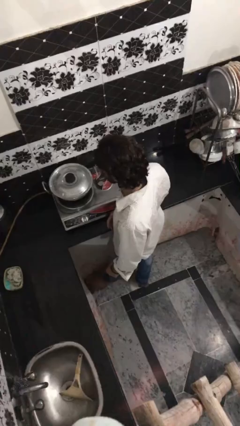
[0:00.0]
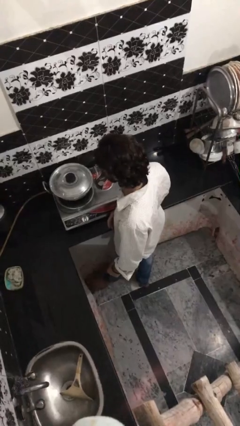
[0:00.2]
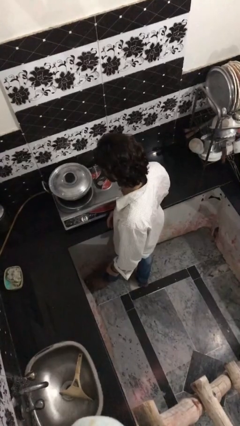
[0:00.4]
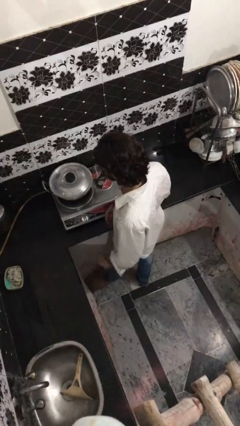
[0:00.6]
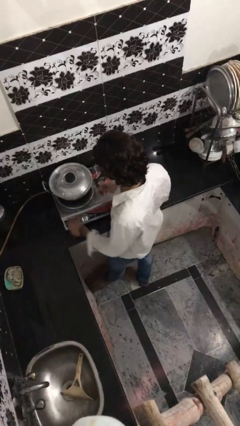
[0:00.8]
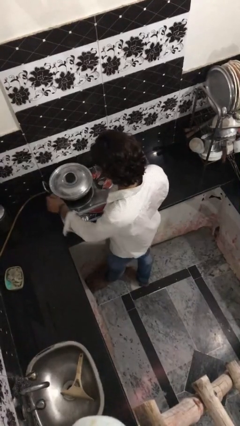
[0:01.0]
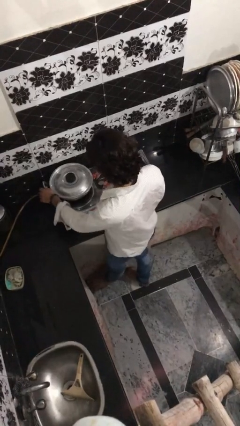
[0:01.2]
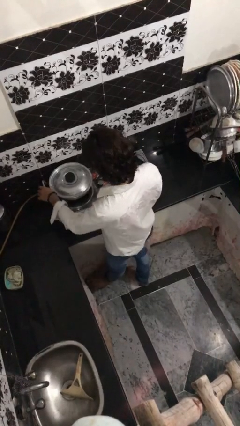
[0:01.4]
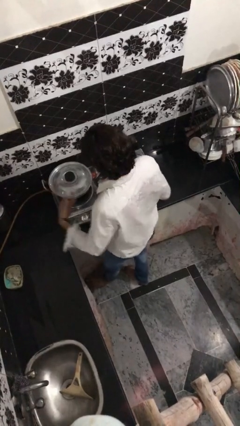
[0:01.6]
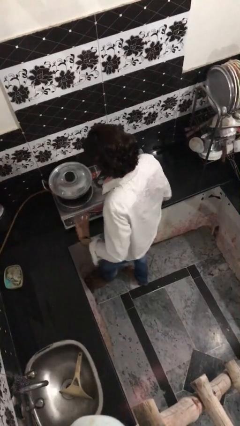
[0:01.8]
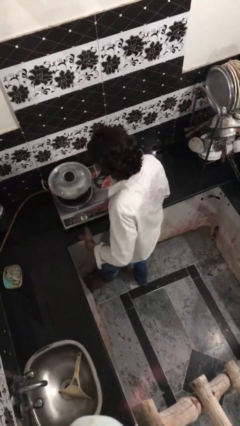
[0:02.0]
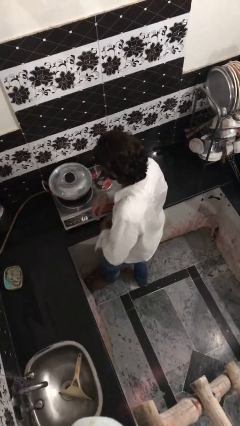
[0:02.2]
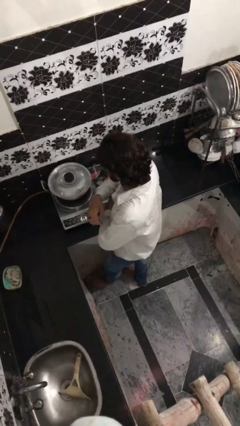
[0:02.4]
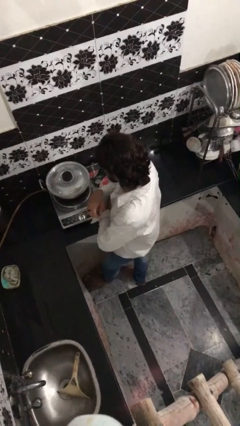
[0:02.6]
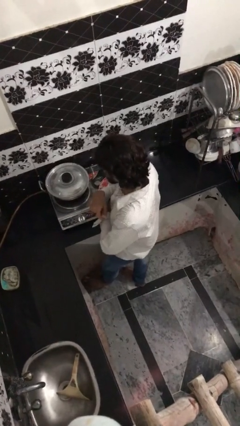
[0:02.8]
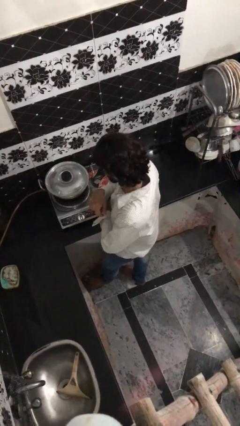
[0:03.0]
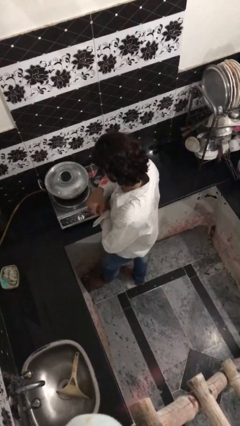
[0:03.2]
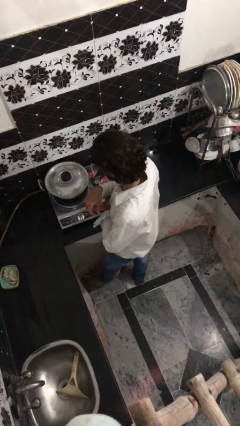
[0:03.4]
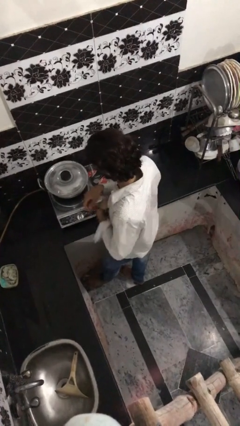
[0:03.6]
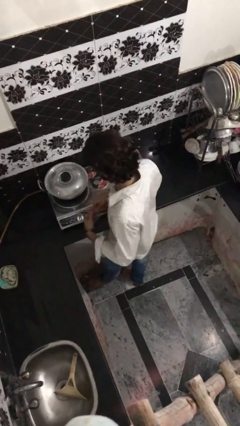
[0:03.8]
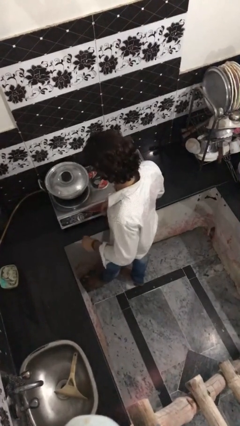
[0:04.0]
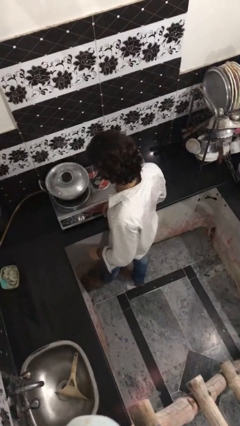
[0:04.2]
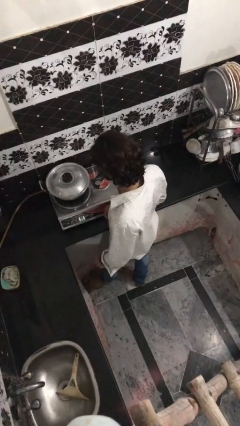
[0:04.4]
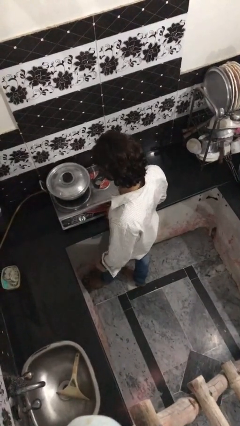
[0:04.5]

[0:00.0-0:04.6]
person burns hand

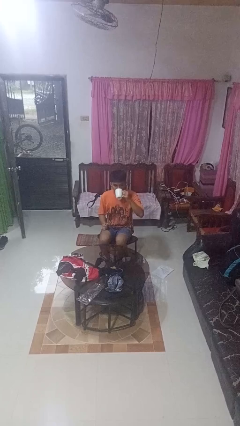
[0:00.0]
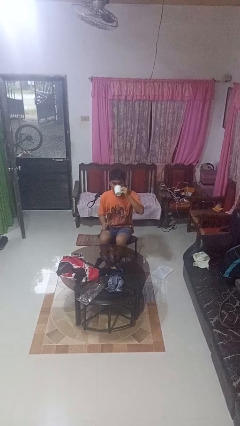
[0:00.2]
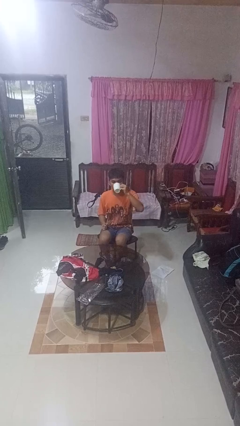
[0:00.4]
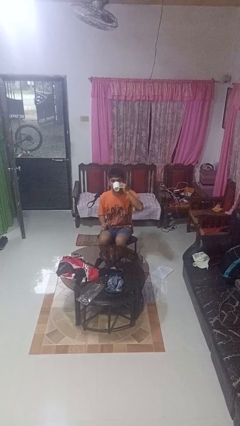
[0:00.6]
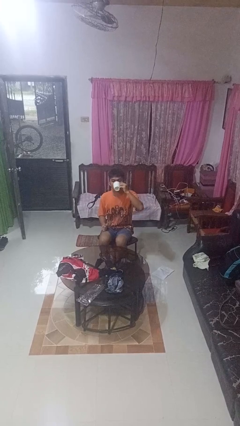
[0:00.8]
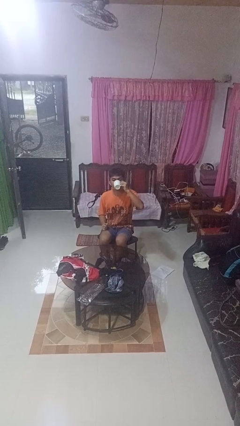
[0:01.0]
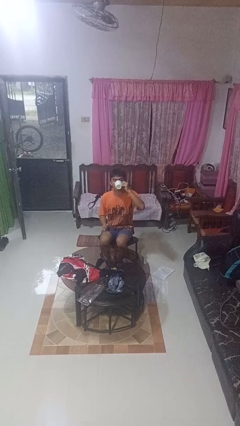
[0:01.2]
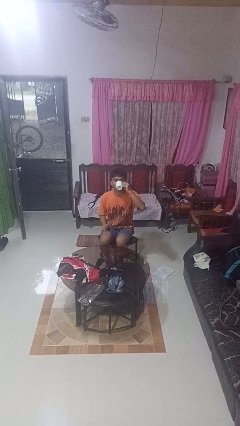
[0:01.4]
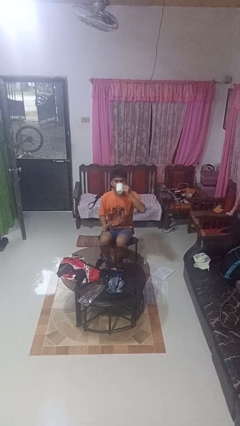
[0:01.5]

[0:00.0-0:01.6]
person drinks from mug

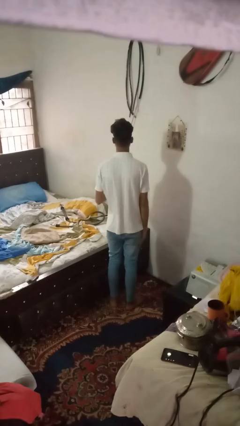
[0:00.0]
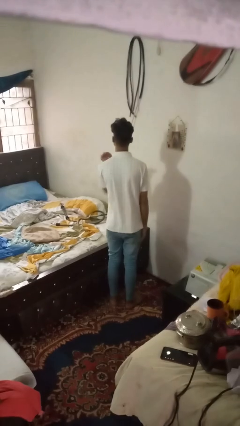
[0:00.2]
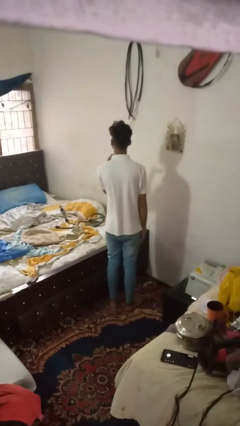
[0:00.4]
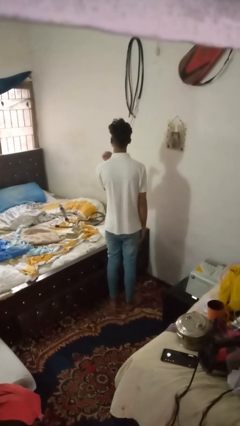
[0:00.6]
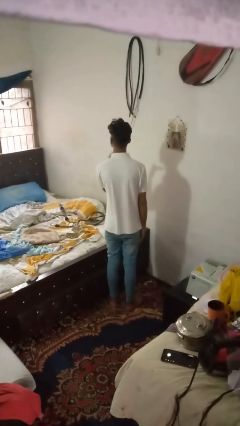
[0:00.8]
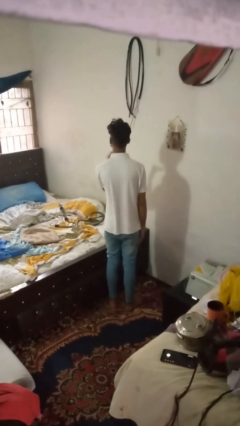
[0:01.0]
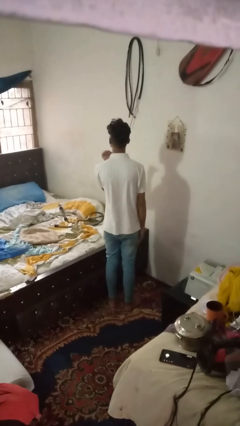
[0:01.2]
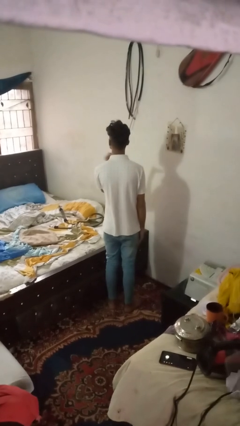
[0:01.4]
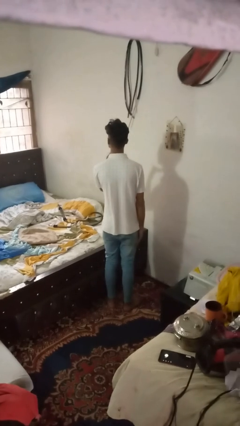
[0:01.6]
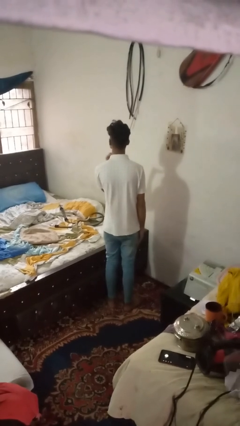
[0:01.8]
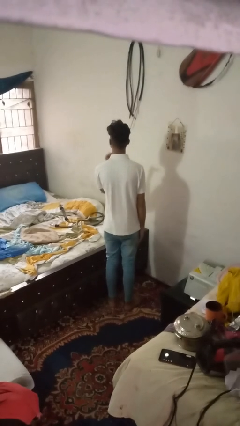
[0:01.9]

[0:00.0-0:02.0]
person gestures cut

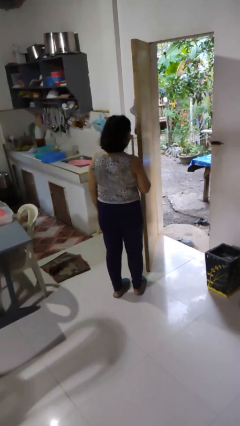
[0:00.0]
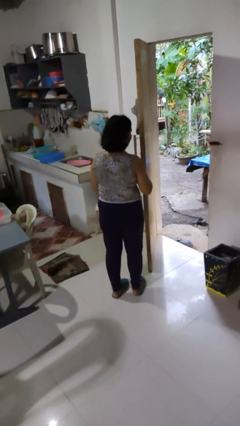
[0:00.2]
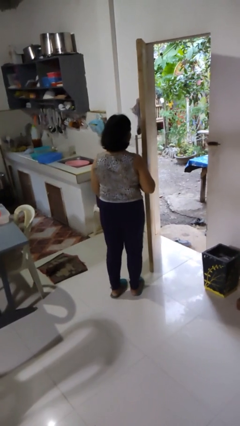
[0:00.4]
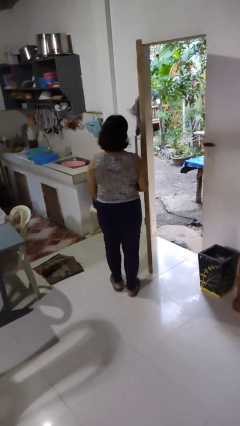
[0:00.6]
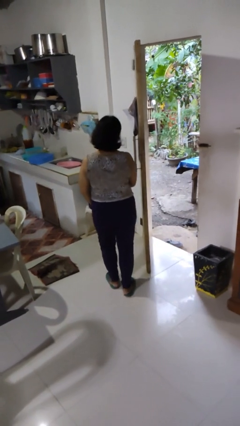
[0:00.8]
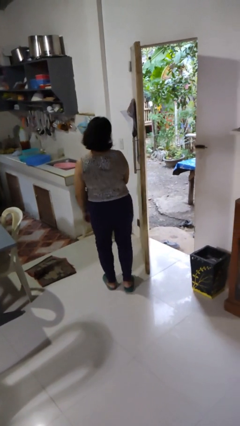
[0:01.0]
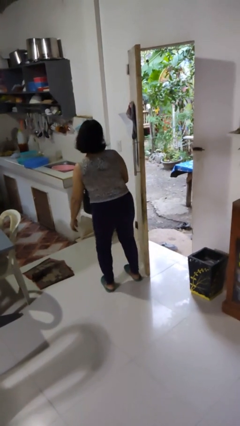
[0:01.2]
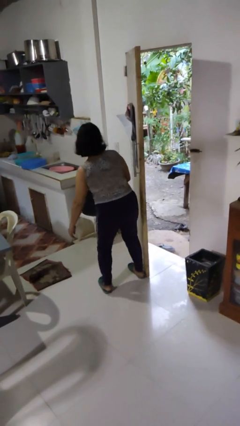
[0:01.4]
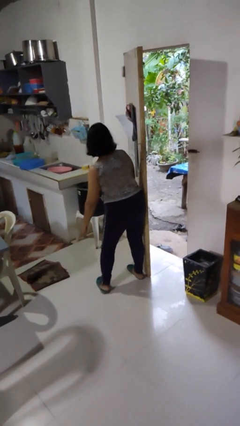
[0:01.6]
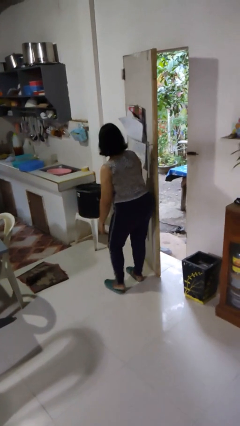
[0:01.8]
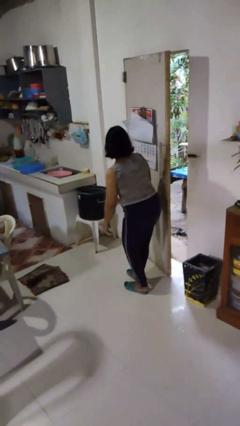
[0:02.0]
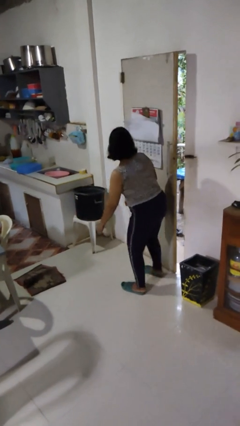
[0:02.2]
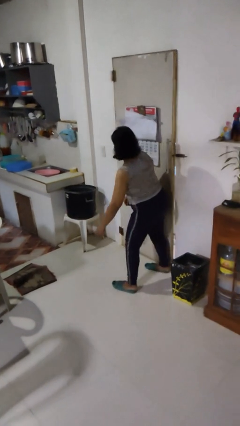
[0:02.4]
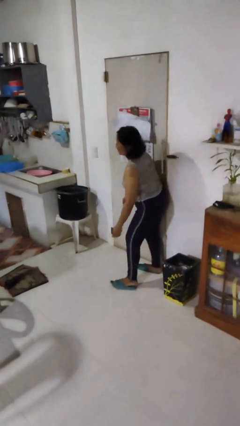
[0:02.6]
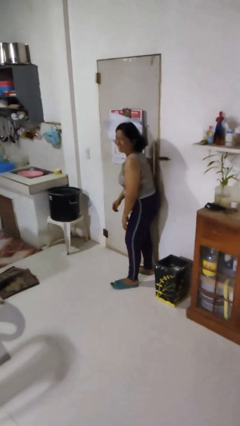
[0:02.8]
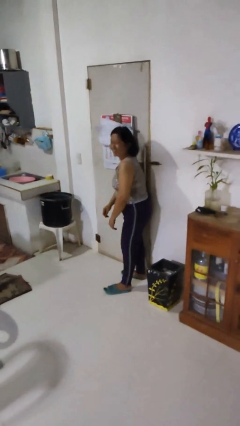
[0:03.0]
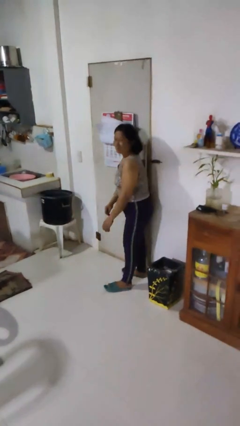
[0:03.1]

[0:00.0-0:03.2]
person closes door with hip

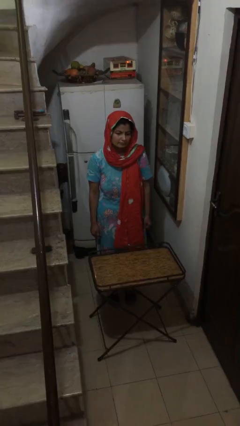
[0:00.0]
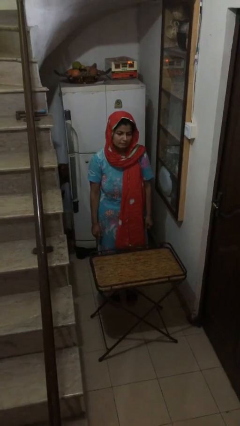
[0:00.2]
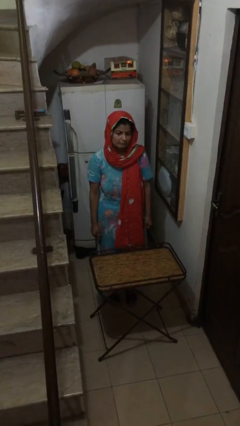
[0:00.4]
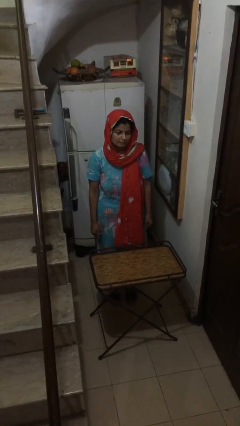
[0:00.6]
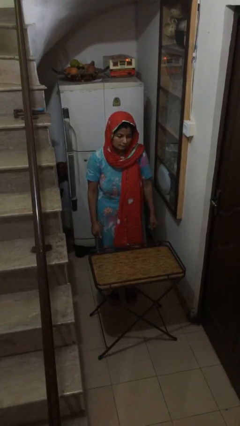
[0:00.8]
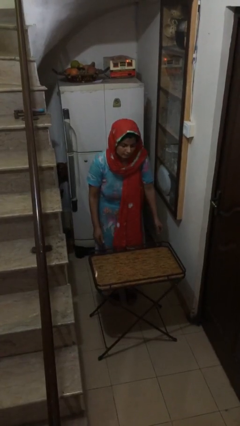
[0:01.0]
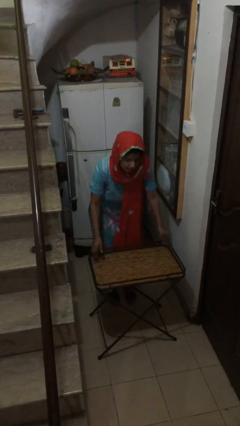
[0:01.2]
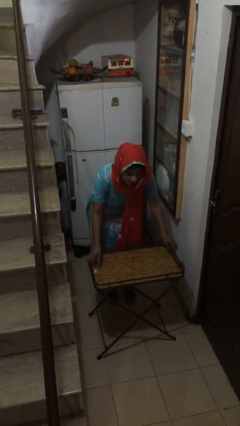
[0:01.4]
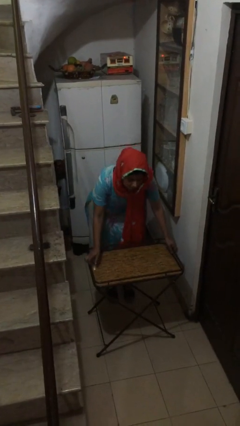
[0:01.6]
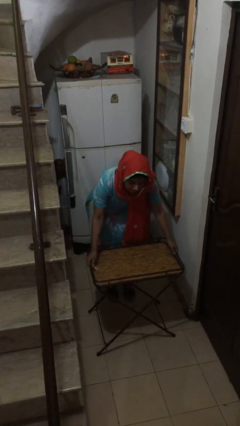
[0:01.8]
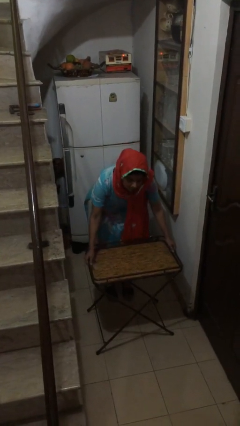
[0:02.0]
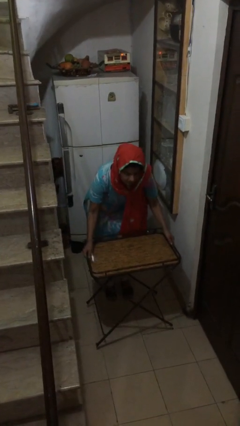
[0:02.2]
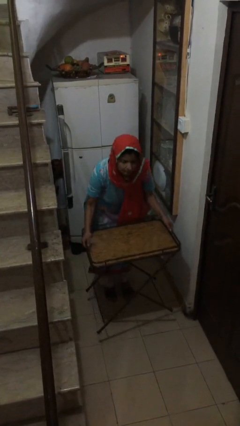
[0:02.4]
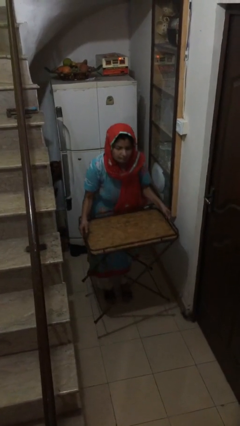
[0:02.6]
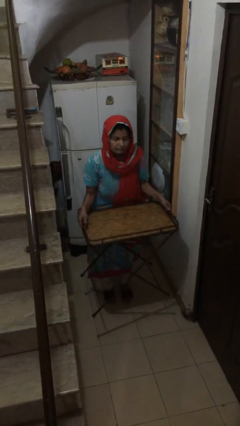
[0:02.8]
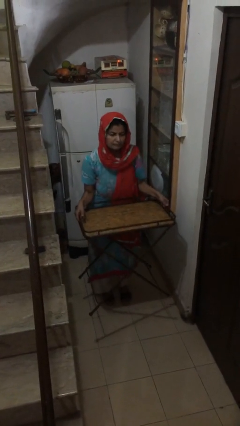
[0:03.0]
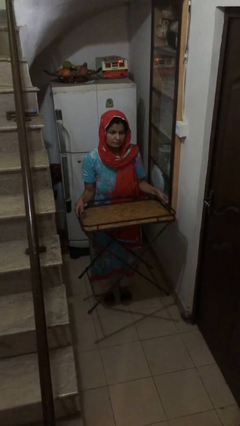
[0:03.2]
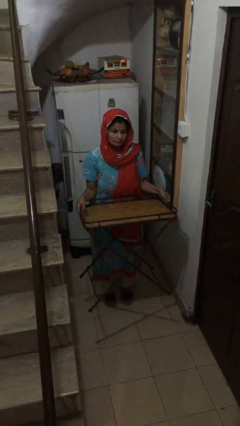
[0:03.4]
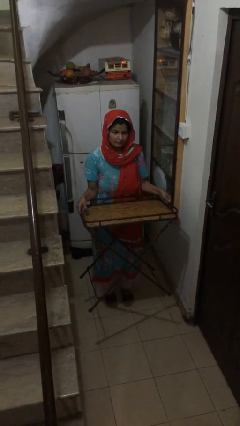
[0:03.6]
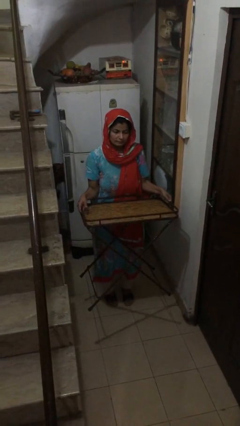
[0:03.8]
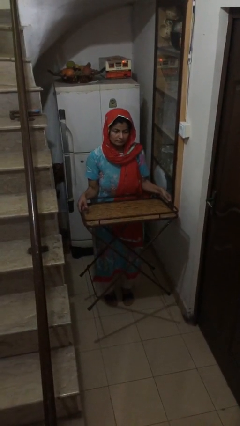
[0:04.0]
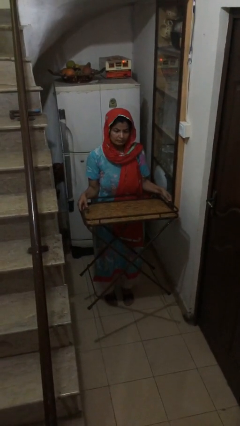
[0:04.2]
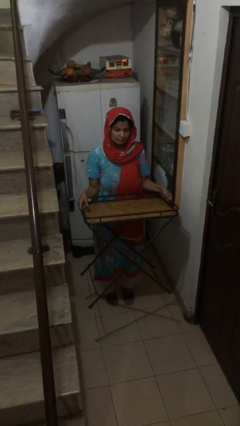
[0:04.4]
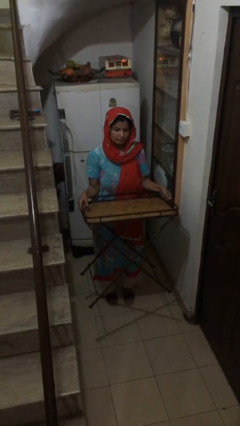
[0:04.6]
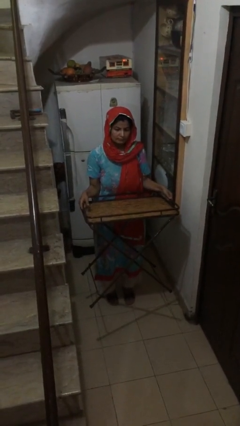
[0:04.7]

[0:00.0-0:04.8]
person carries heavy object

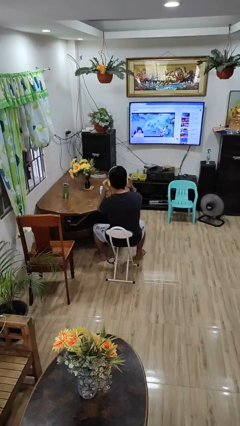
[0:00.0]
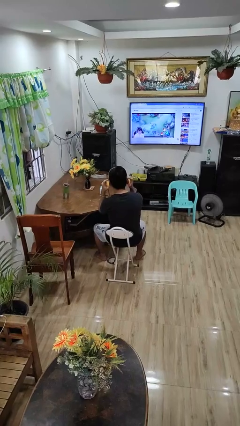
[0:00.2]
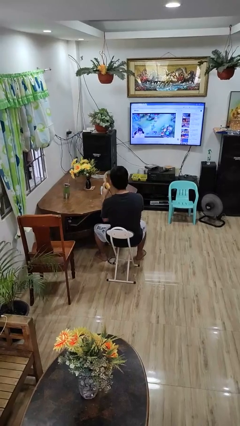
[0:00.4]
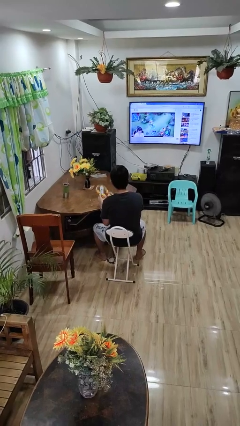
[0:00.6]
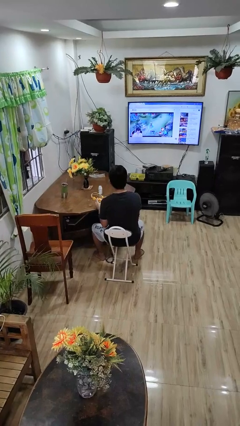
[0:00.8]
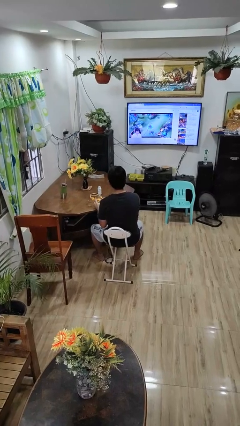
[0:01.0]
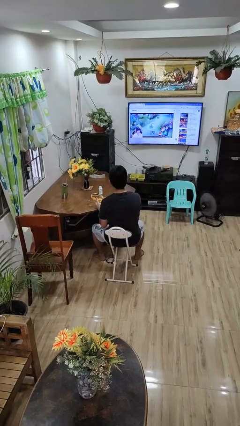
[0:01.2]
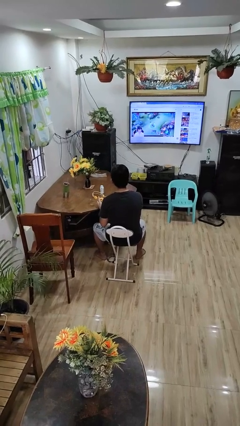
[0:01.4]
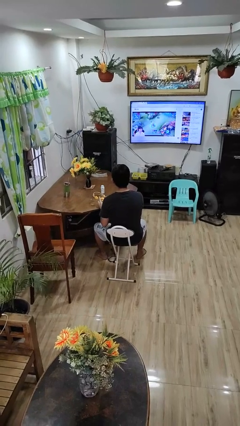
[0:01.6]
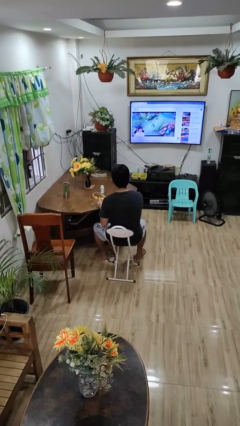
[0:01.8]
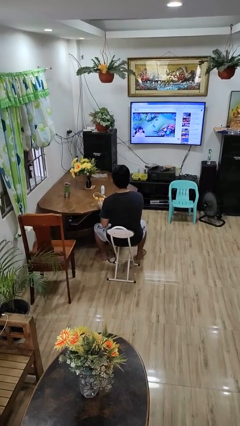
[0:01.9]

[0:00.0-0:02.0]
person takes off headphones
